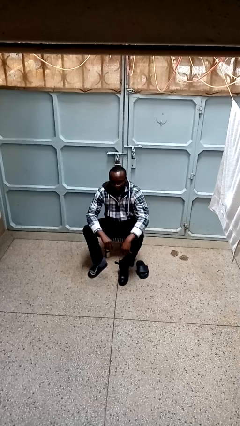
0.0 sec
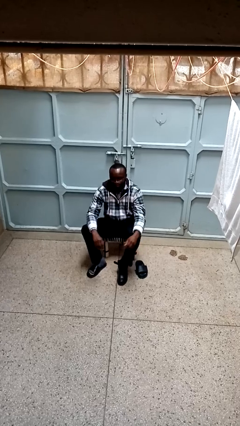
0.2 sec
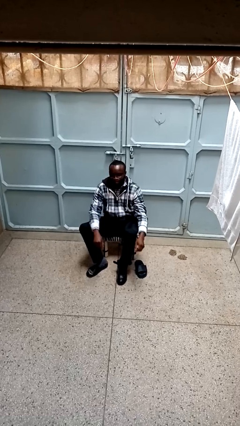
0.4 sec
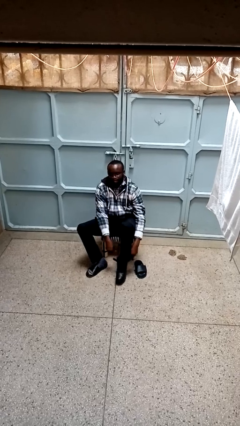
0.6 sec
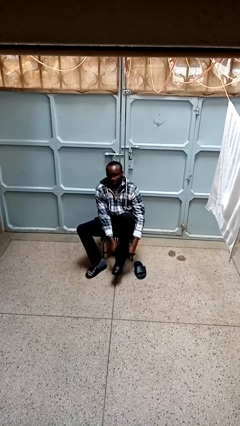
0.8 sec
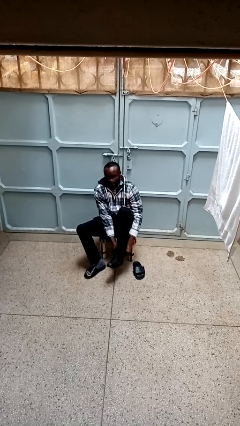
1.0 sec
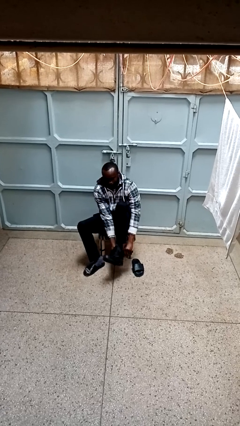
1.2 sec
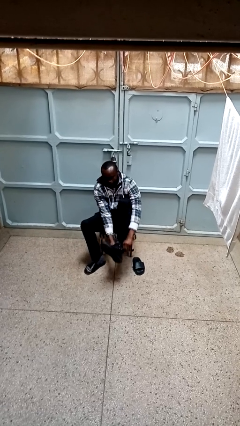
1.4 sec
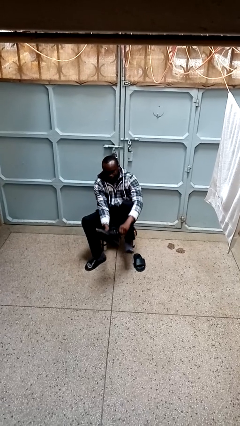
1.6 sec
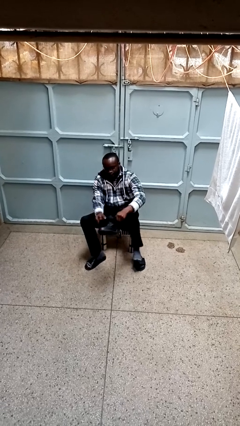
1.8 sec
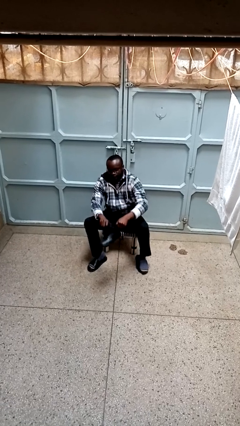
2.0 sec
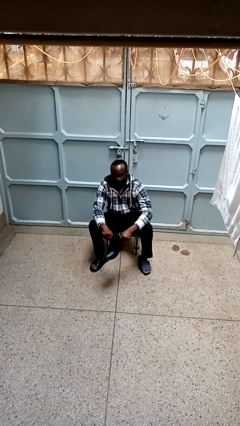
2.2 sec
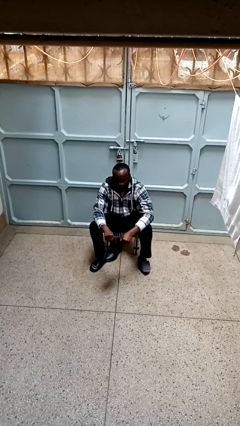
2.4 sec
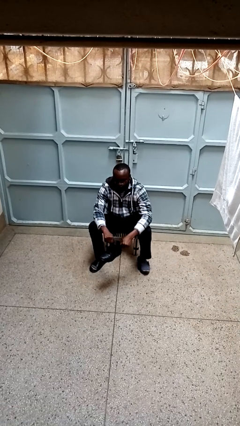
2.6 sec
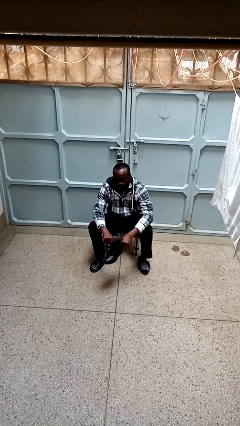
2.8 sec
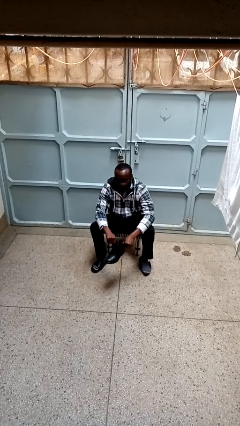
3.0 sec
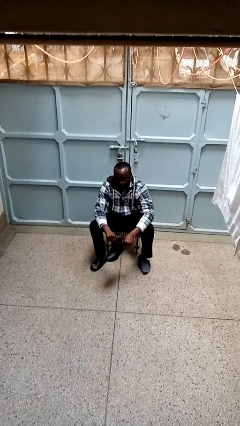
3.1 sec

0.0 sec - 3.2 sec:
person takes off boots

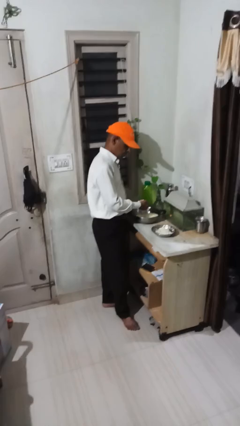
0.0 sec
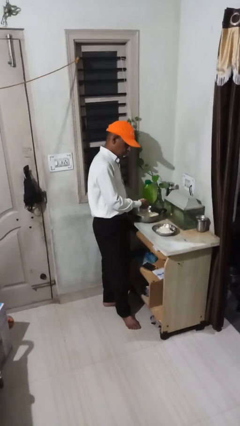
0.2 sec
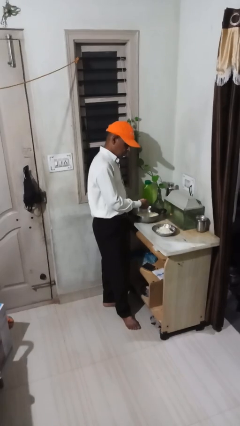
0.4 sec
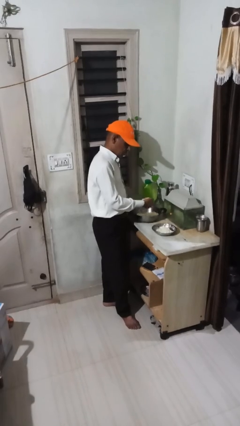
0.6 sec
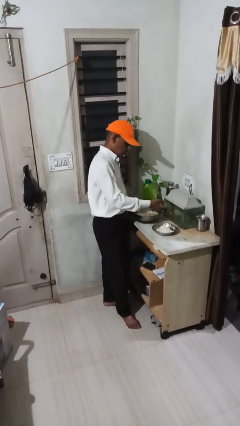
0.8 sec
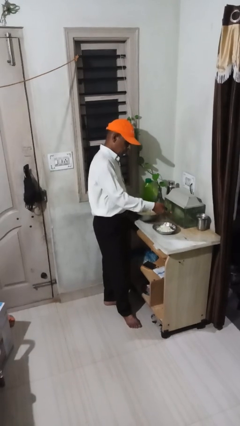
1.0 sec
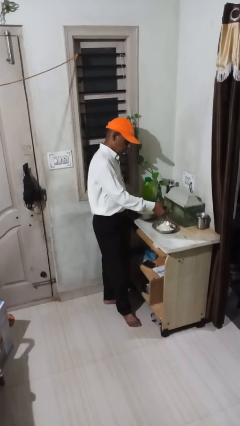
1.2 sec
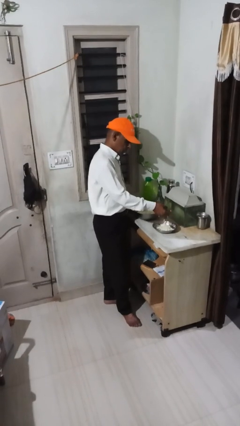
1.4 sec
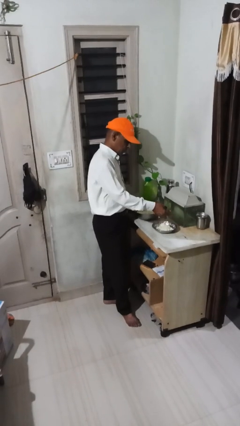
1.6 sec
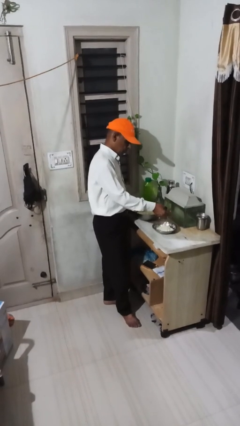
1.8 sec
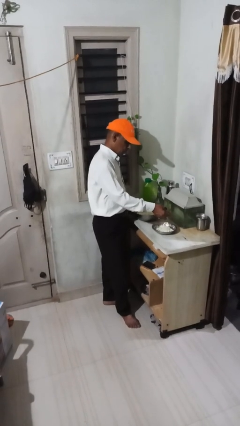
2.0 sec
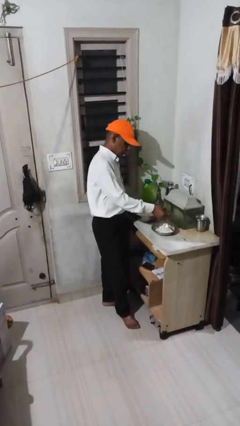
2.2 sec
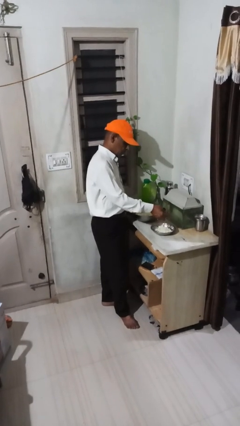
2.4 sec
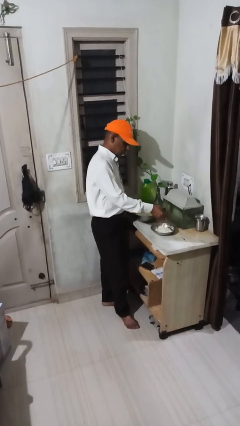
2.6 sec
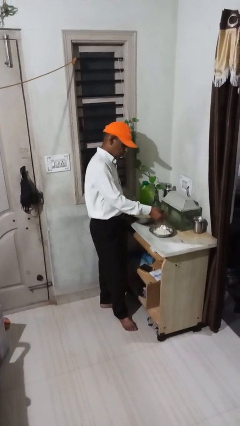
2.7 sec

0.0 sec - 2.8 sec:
person pours into bowl

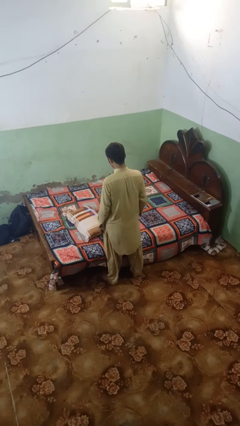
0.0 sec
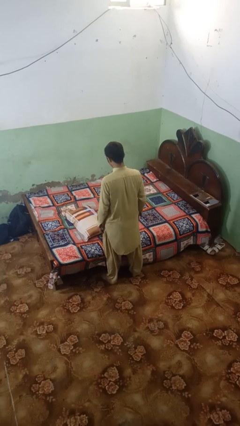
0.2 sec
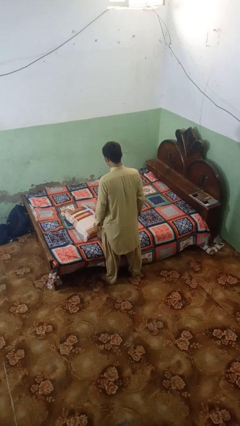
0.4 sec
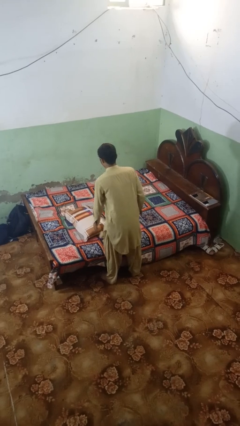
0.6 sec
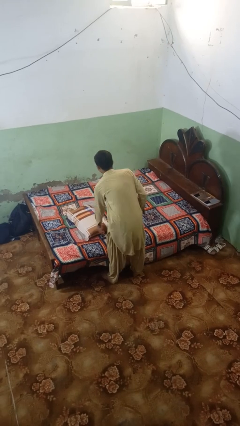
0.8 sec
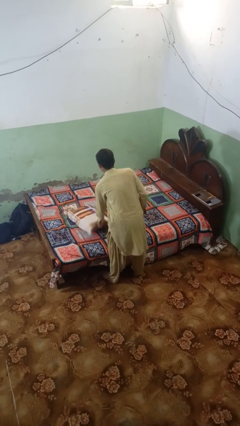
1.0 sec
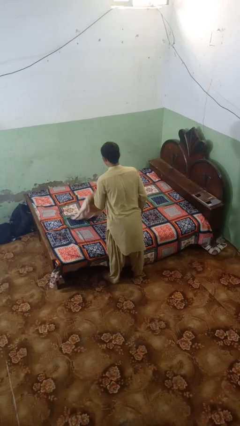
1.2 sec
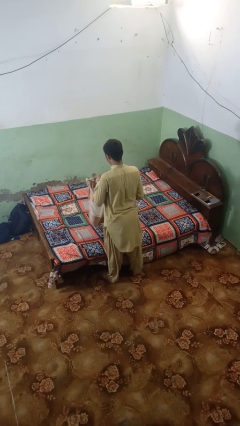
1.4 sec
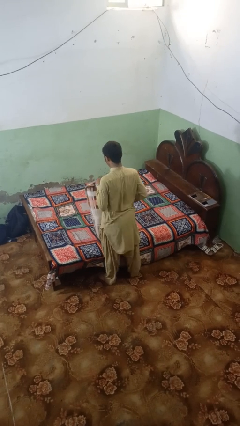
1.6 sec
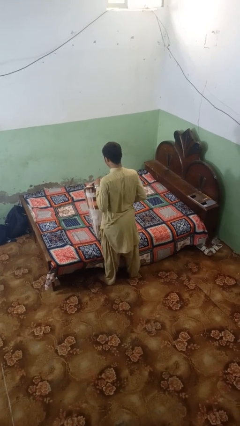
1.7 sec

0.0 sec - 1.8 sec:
person picks up object from bed

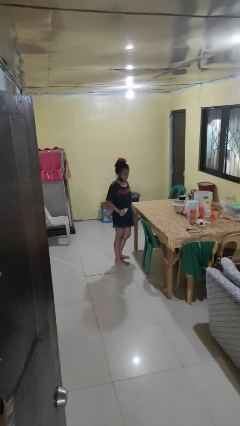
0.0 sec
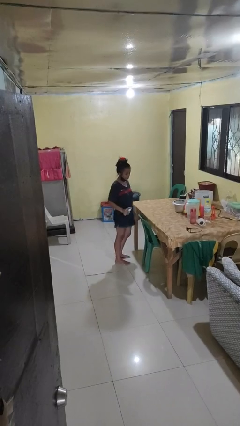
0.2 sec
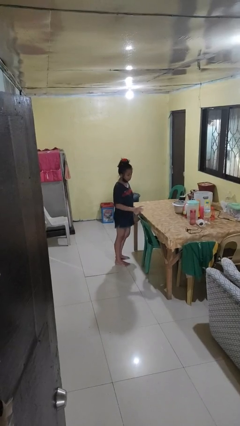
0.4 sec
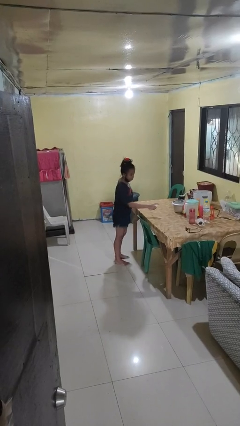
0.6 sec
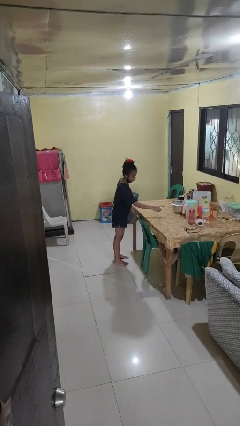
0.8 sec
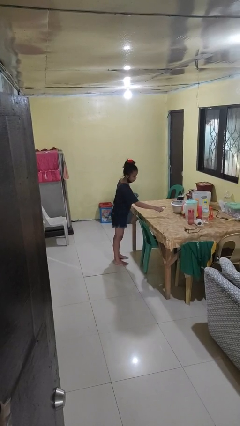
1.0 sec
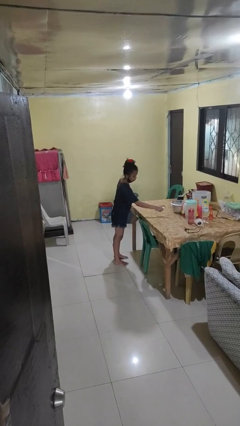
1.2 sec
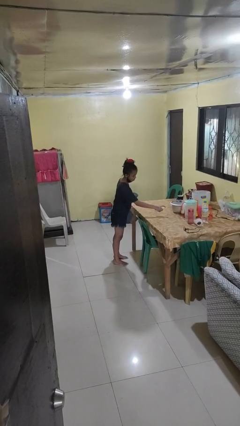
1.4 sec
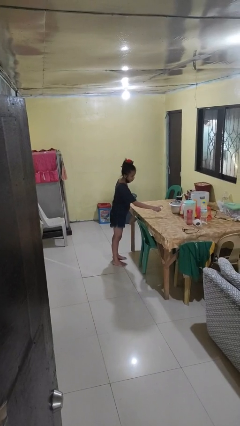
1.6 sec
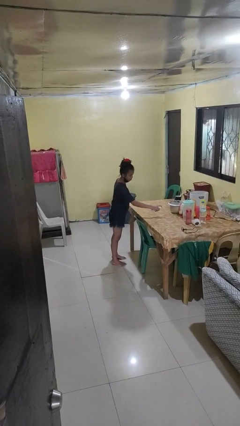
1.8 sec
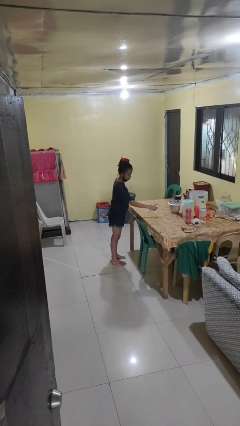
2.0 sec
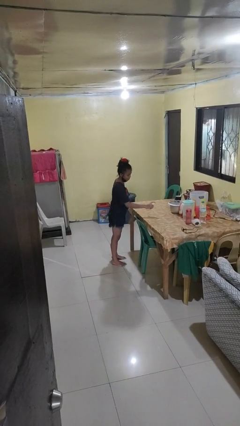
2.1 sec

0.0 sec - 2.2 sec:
person sprays from bottle

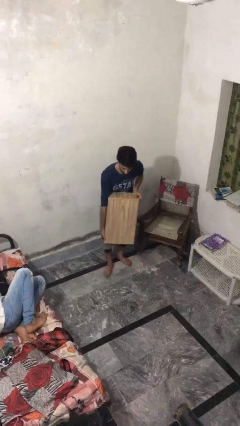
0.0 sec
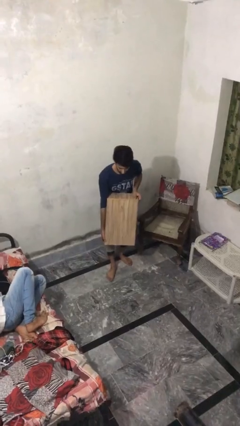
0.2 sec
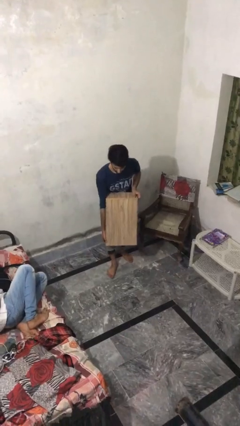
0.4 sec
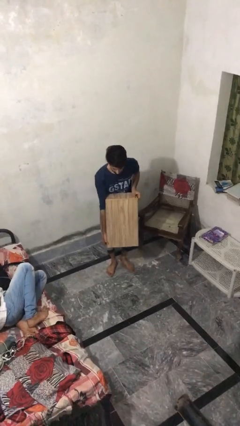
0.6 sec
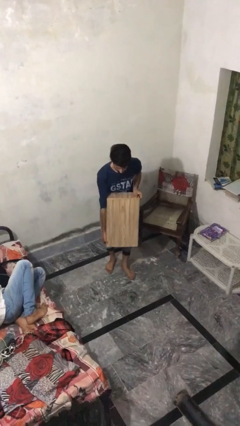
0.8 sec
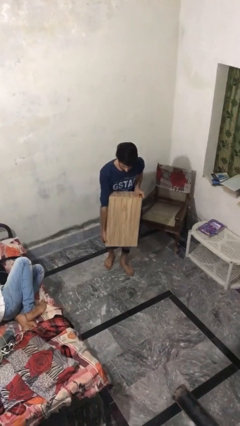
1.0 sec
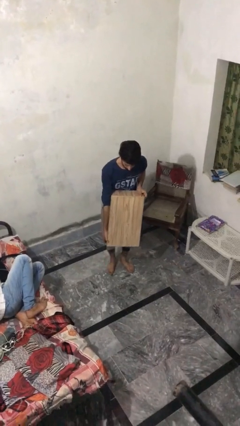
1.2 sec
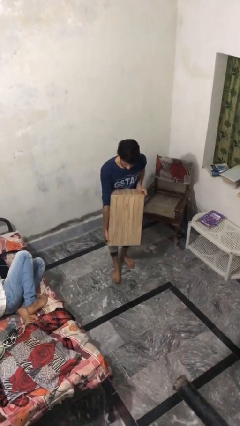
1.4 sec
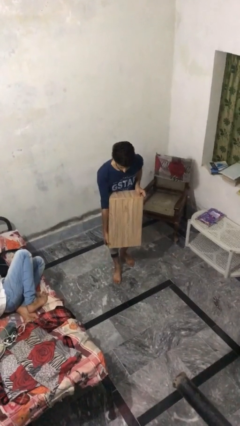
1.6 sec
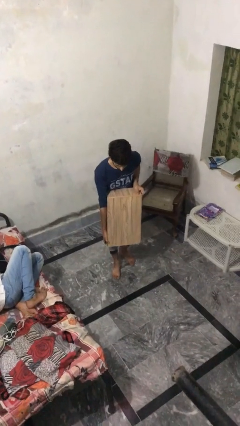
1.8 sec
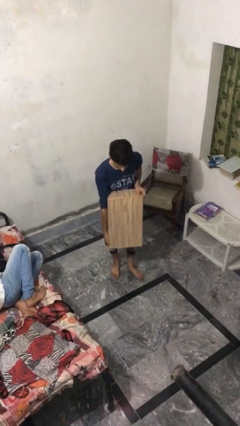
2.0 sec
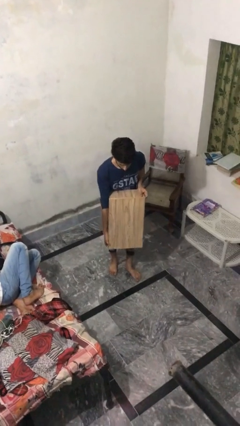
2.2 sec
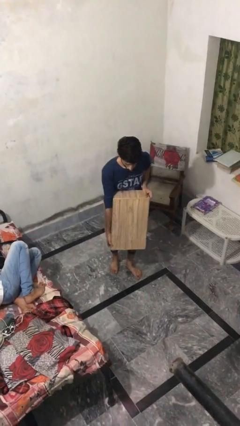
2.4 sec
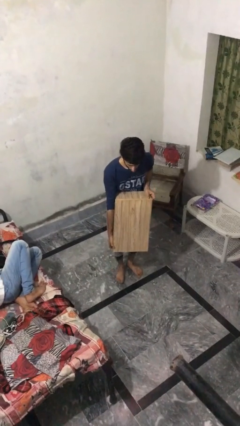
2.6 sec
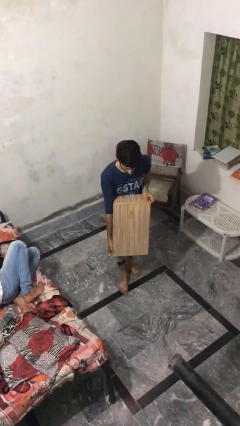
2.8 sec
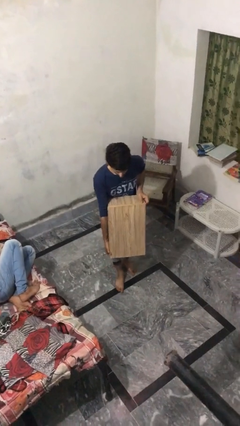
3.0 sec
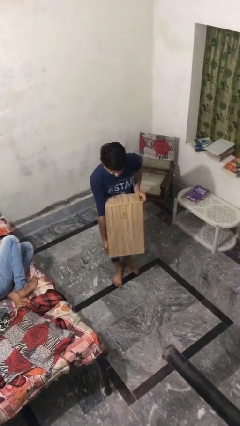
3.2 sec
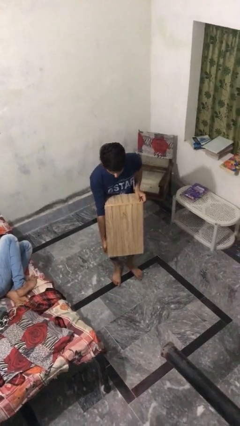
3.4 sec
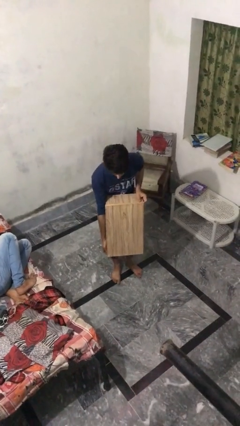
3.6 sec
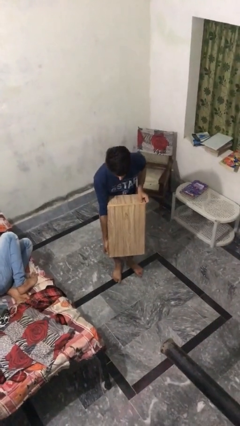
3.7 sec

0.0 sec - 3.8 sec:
person carries heavy object

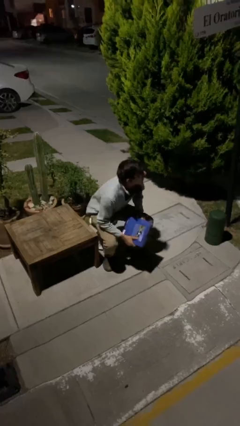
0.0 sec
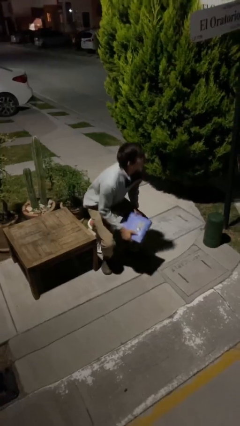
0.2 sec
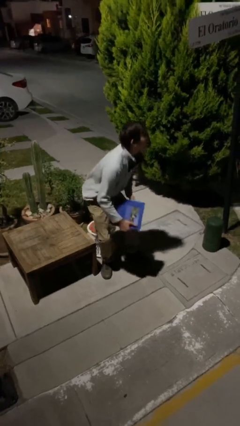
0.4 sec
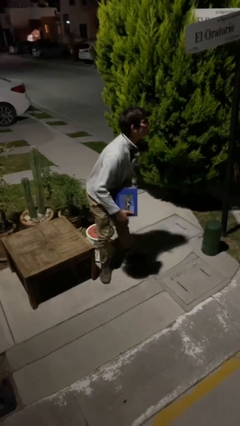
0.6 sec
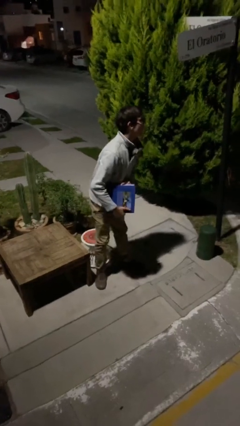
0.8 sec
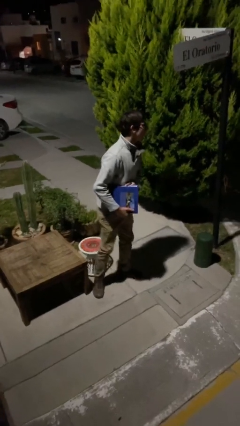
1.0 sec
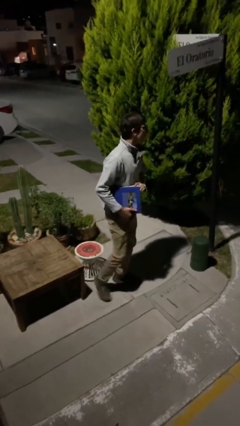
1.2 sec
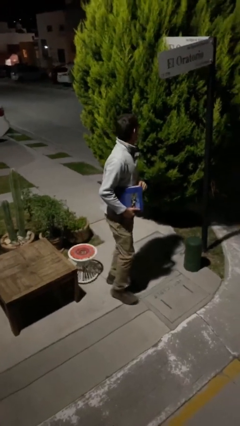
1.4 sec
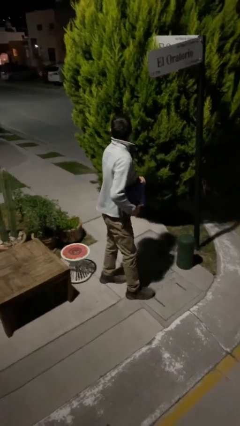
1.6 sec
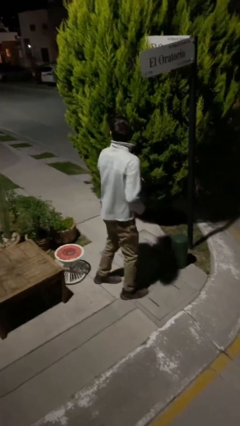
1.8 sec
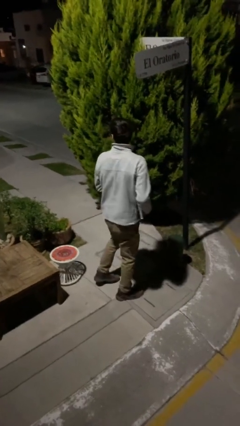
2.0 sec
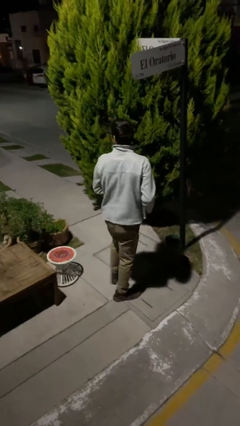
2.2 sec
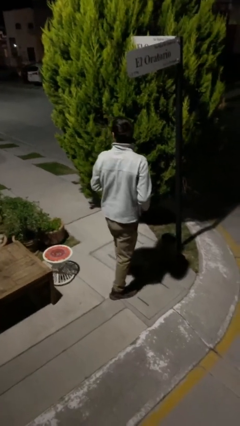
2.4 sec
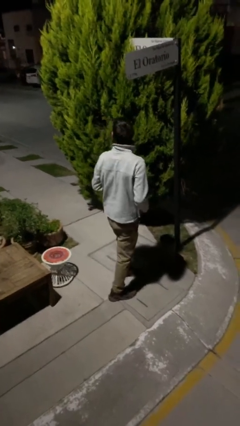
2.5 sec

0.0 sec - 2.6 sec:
person stands up

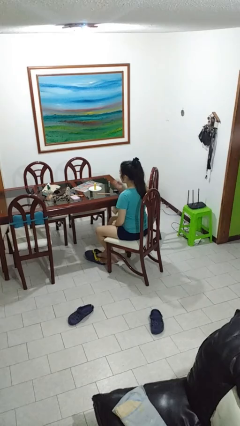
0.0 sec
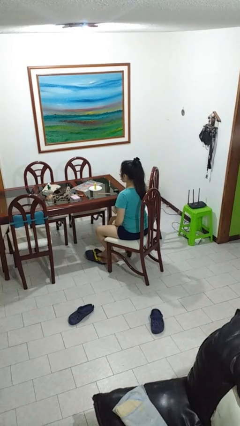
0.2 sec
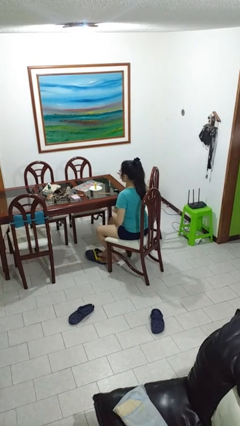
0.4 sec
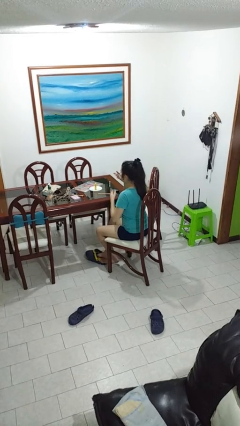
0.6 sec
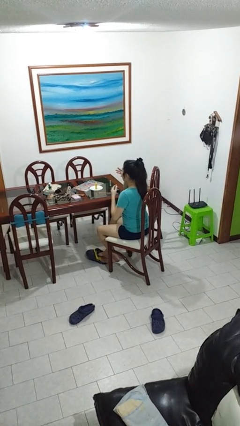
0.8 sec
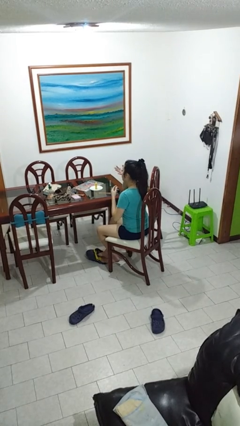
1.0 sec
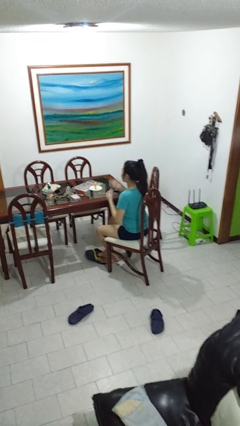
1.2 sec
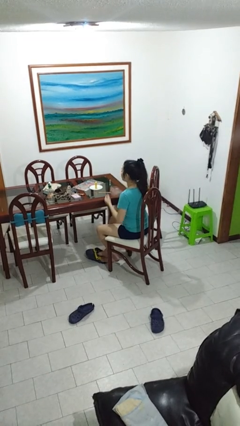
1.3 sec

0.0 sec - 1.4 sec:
person licks fingers
